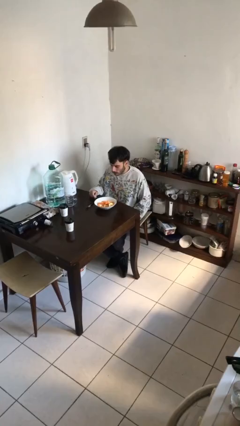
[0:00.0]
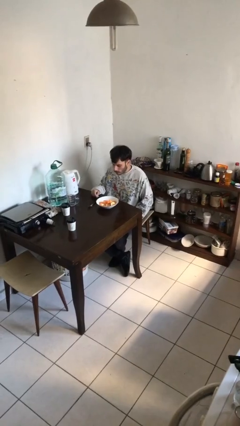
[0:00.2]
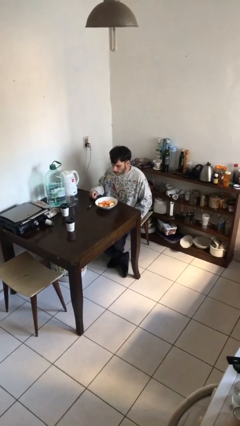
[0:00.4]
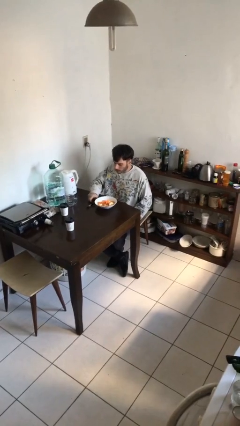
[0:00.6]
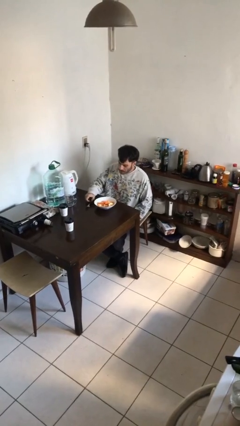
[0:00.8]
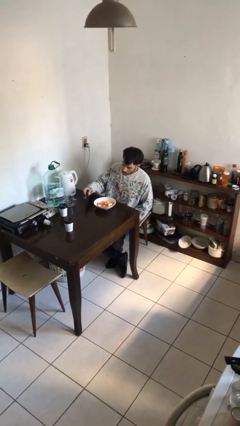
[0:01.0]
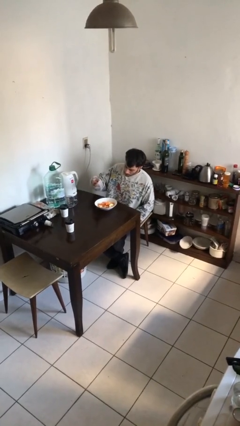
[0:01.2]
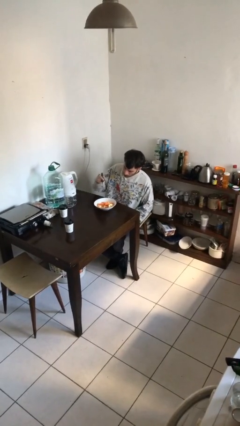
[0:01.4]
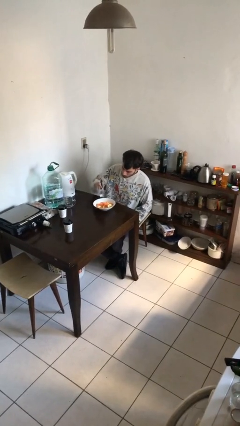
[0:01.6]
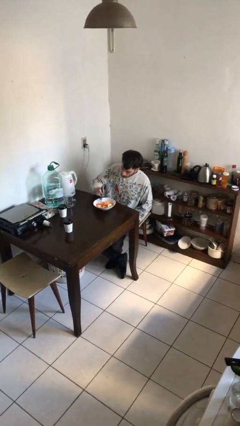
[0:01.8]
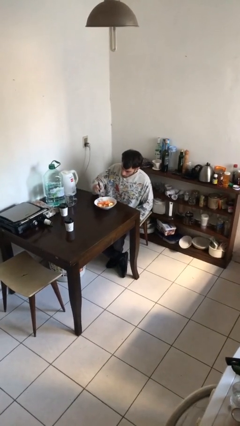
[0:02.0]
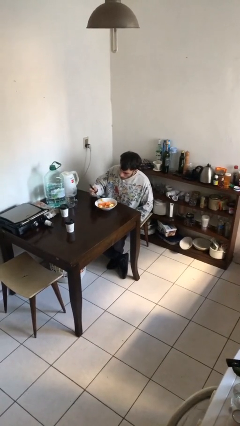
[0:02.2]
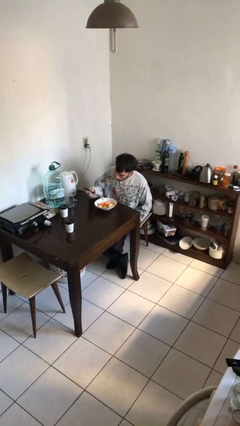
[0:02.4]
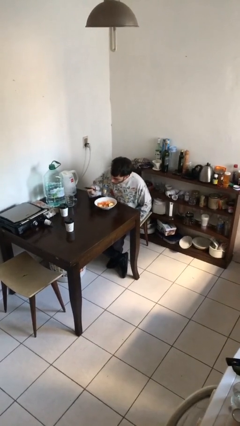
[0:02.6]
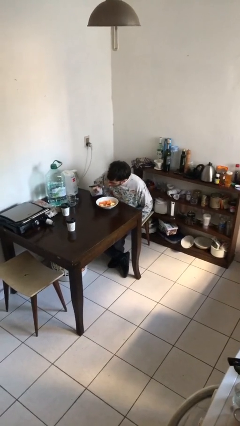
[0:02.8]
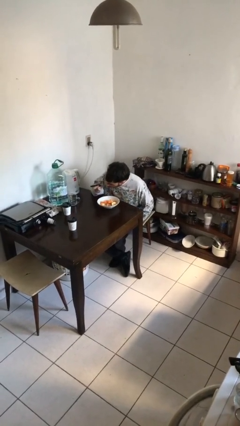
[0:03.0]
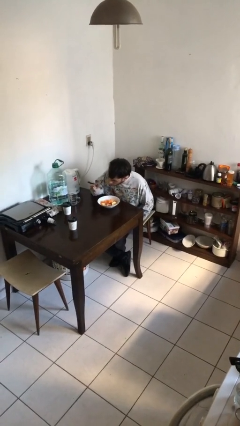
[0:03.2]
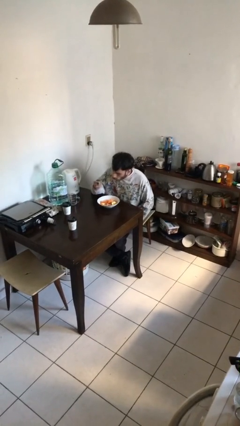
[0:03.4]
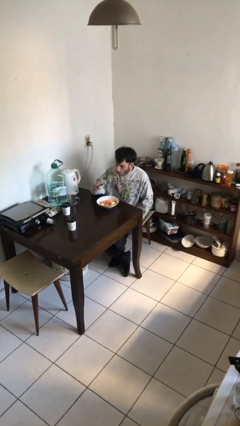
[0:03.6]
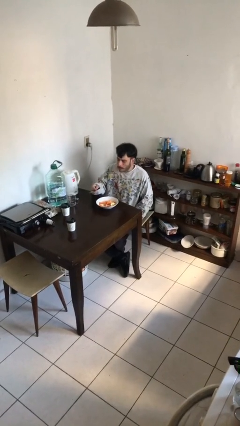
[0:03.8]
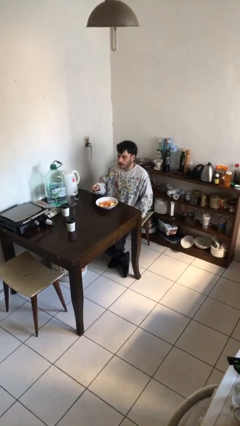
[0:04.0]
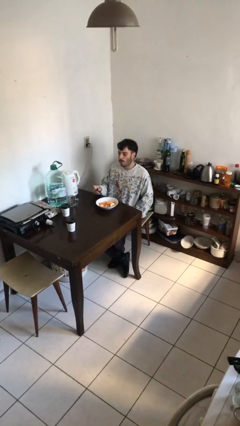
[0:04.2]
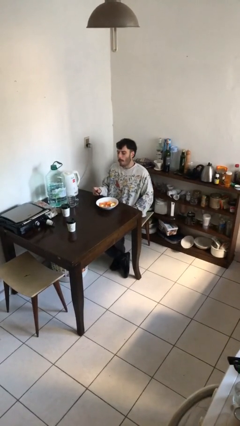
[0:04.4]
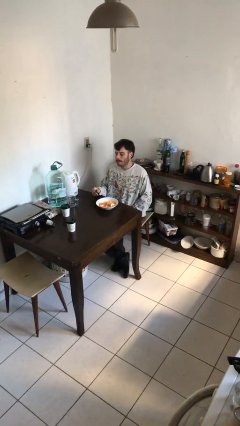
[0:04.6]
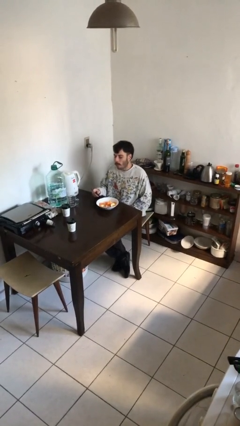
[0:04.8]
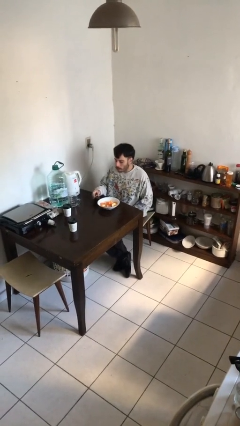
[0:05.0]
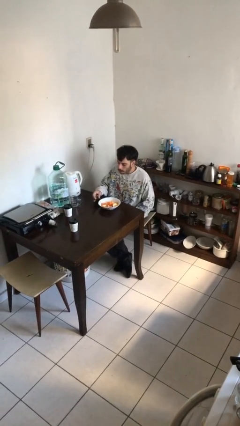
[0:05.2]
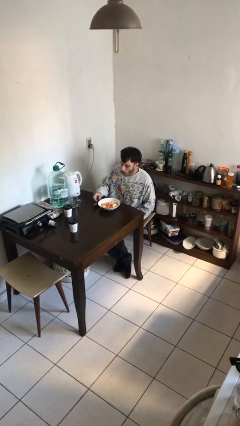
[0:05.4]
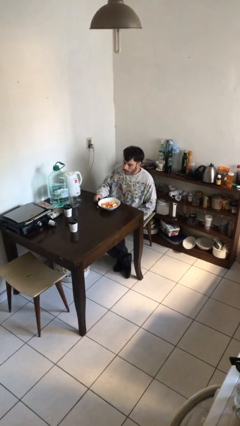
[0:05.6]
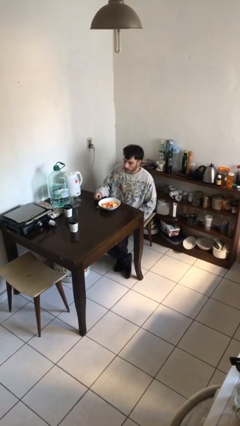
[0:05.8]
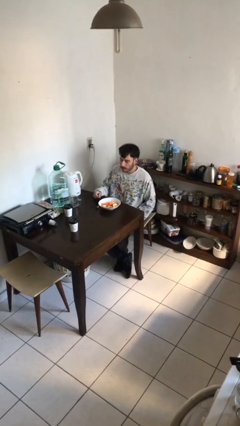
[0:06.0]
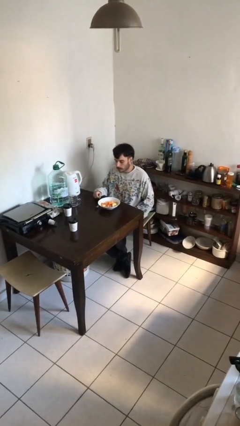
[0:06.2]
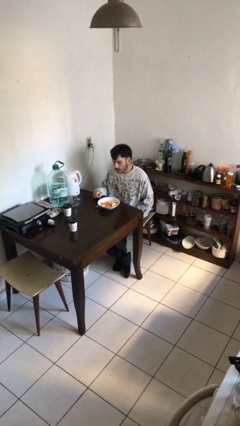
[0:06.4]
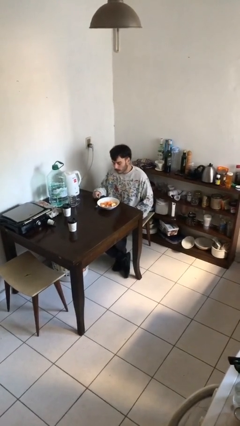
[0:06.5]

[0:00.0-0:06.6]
person eats with utensil

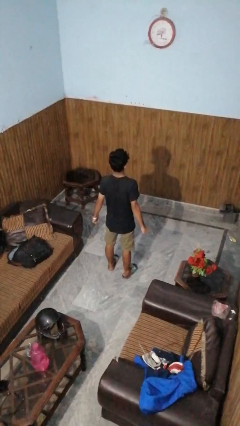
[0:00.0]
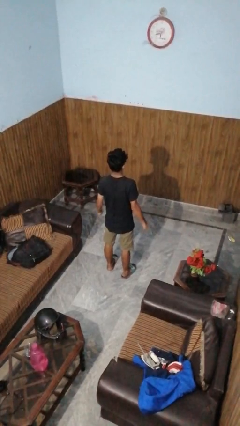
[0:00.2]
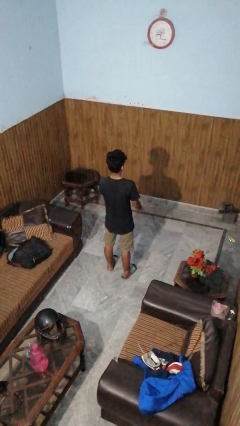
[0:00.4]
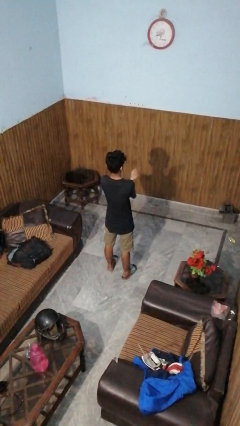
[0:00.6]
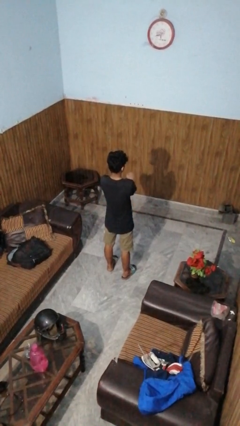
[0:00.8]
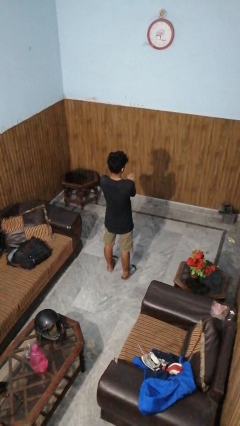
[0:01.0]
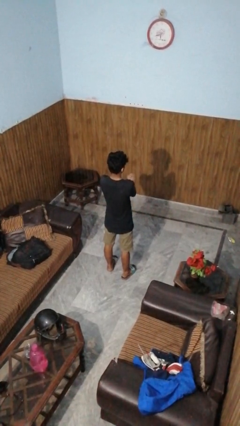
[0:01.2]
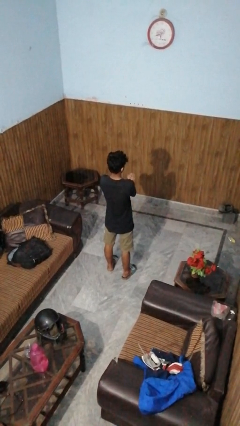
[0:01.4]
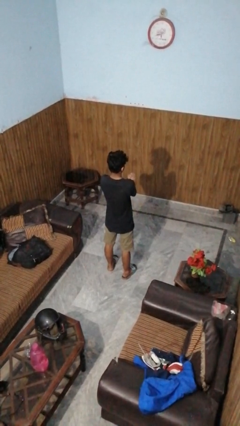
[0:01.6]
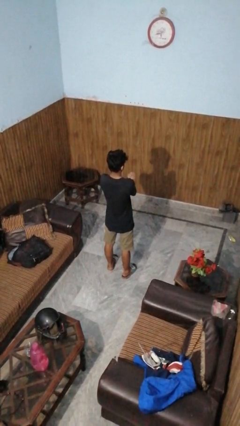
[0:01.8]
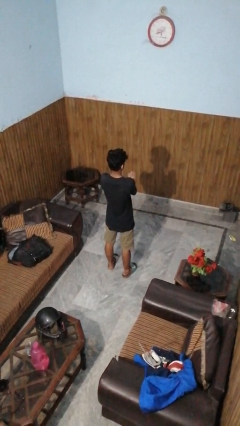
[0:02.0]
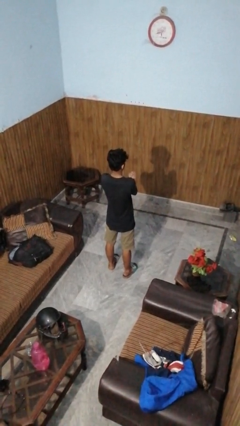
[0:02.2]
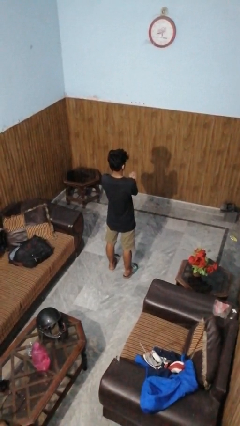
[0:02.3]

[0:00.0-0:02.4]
person crosses arms

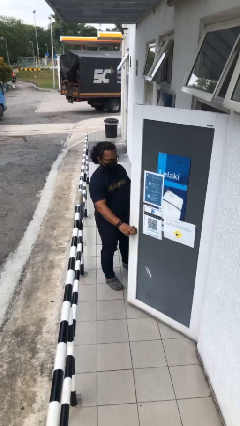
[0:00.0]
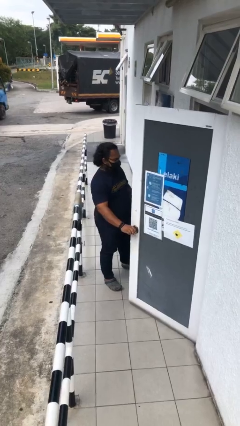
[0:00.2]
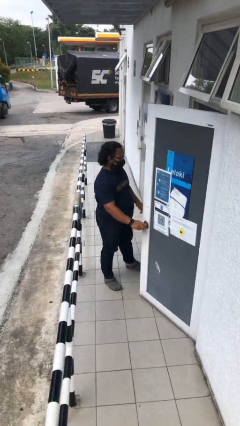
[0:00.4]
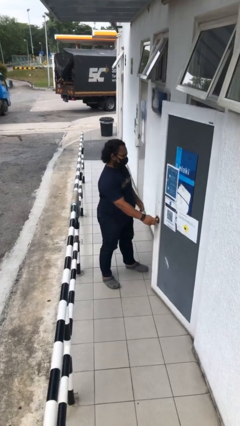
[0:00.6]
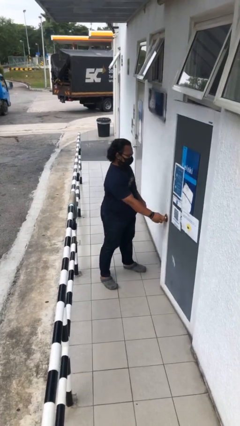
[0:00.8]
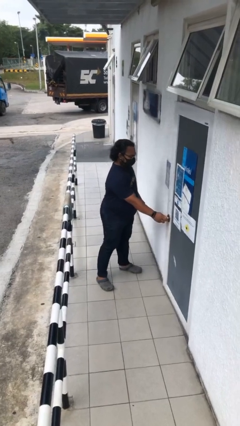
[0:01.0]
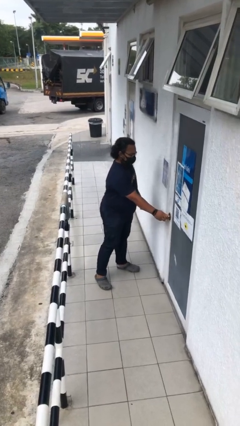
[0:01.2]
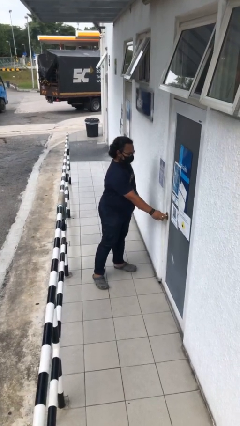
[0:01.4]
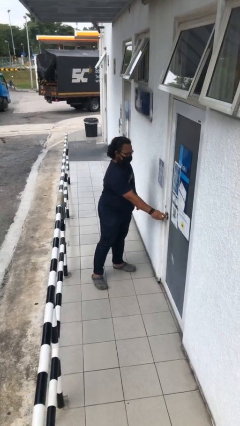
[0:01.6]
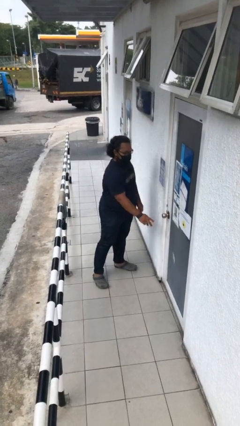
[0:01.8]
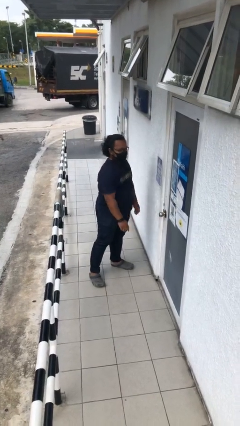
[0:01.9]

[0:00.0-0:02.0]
person closes facility door

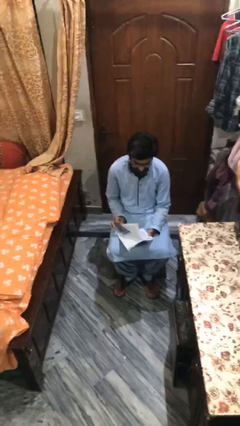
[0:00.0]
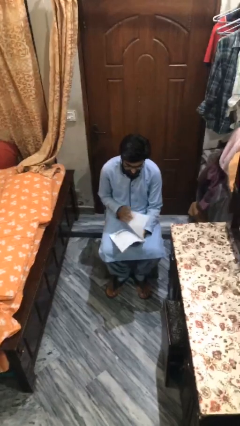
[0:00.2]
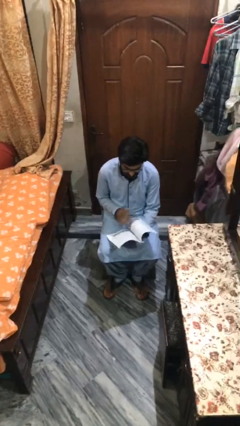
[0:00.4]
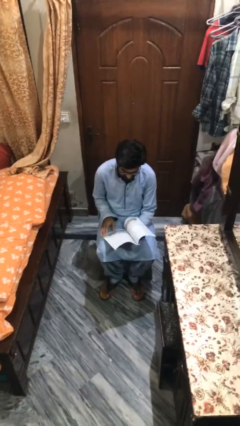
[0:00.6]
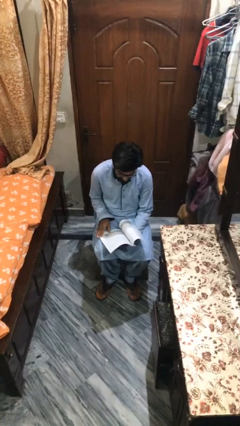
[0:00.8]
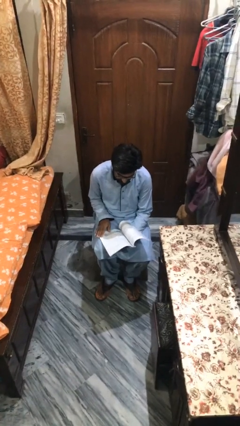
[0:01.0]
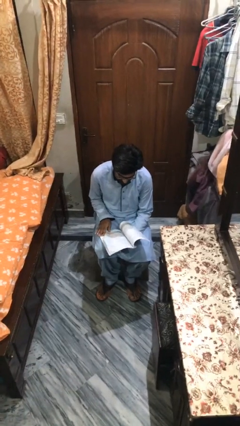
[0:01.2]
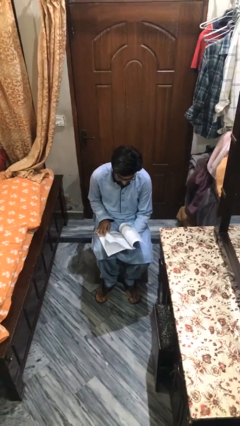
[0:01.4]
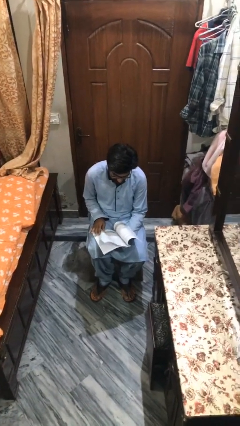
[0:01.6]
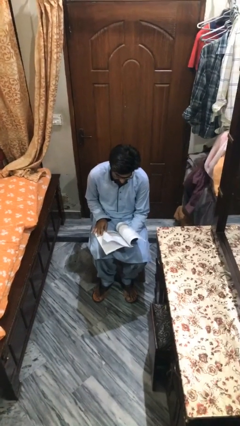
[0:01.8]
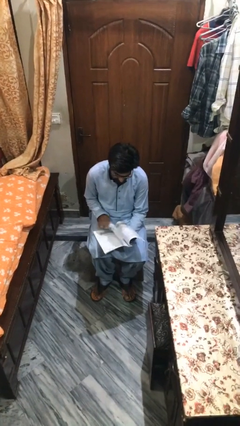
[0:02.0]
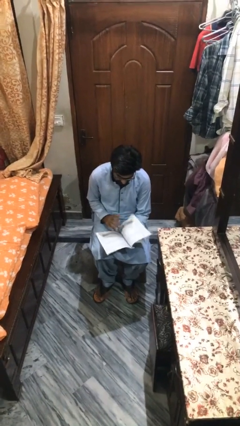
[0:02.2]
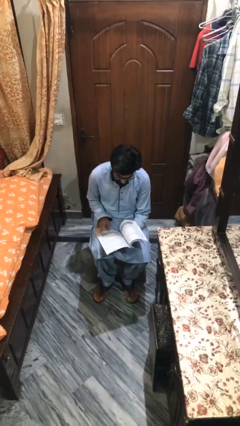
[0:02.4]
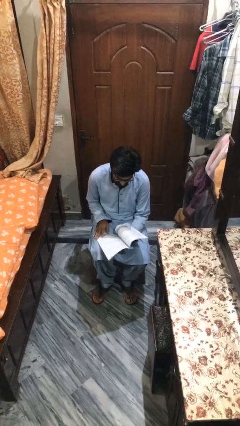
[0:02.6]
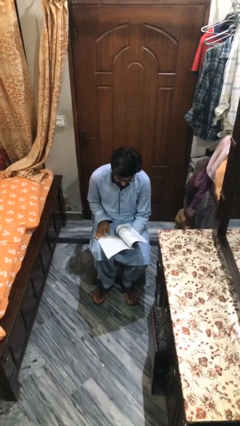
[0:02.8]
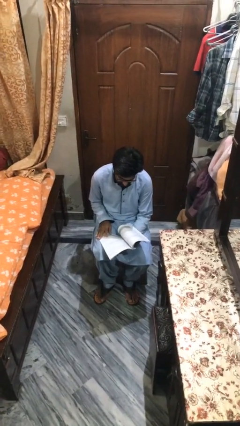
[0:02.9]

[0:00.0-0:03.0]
person reads document

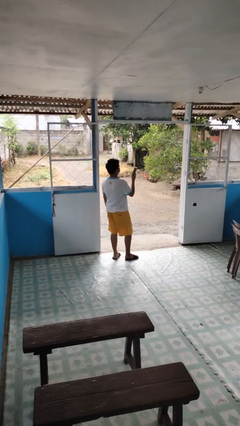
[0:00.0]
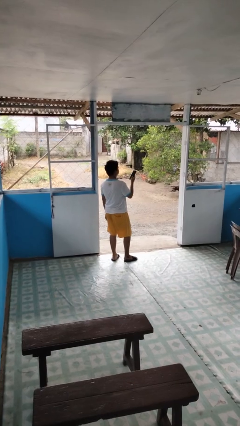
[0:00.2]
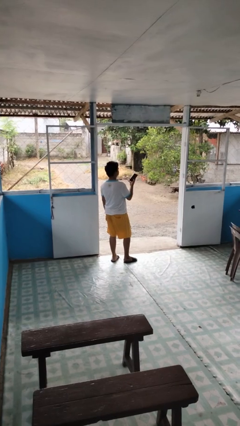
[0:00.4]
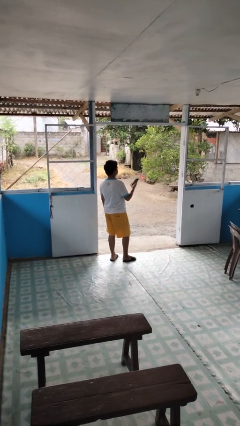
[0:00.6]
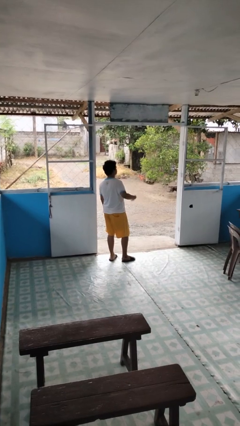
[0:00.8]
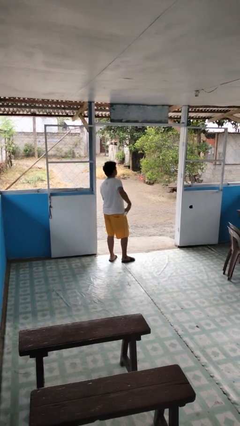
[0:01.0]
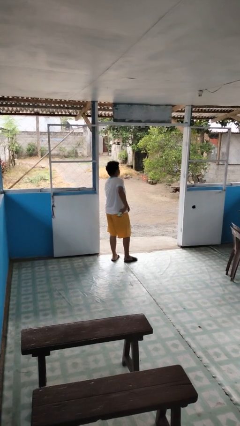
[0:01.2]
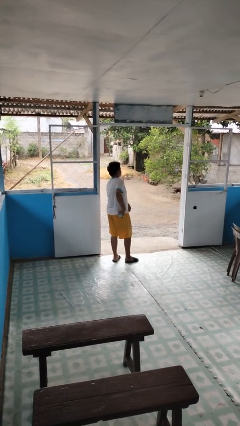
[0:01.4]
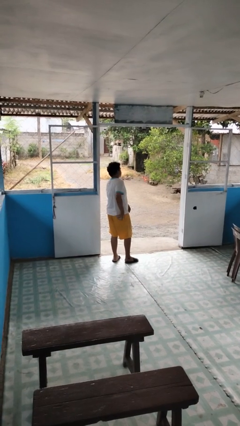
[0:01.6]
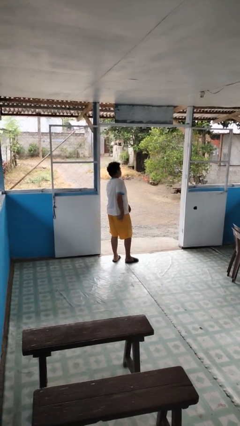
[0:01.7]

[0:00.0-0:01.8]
person puts phone into pocket

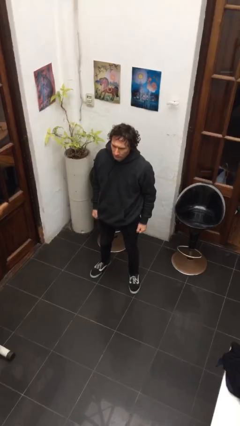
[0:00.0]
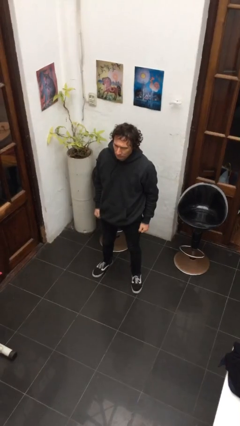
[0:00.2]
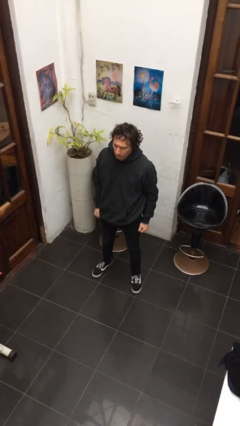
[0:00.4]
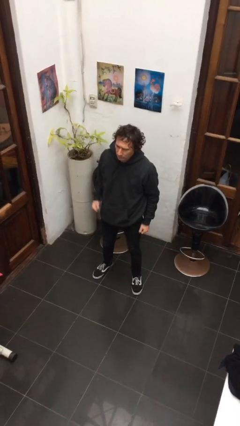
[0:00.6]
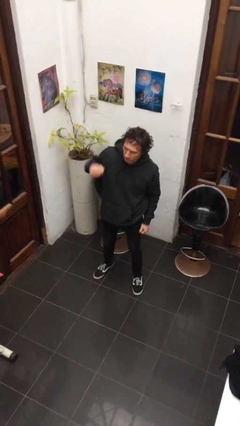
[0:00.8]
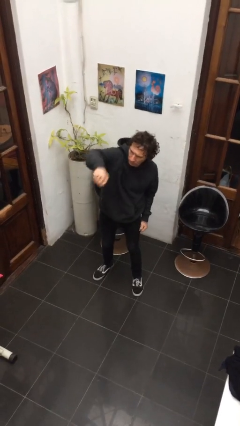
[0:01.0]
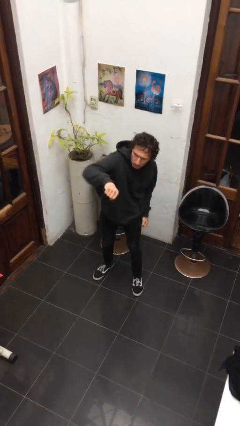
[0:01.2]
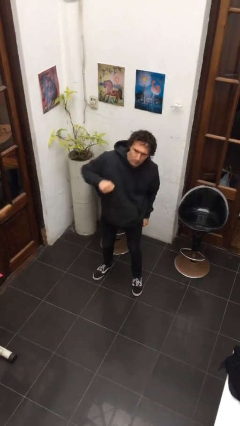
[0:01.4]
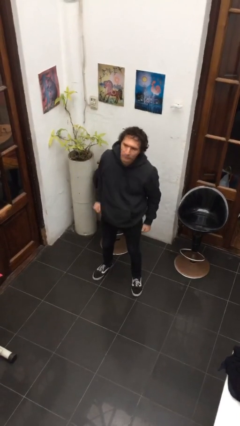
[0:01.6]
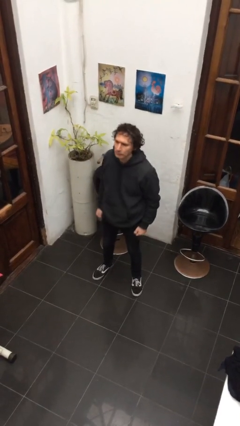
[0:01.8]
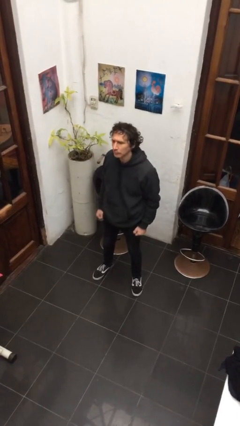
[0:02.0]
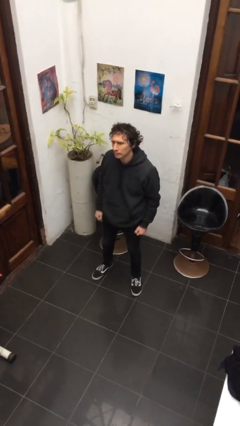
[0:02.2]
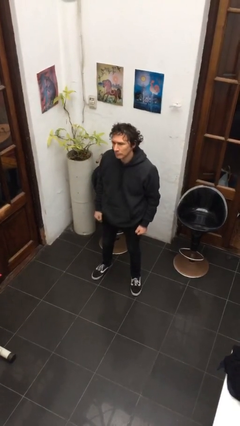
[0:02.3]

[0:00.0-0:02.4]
person punches
